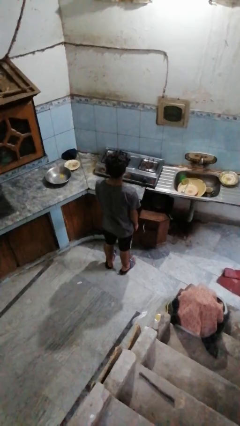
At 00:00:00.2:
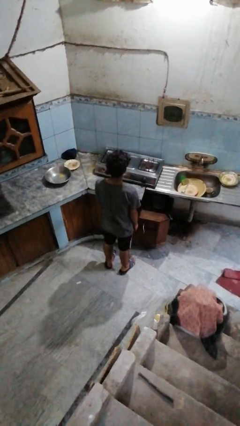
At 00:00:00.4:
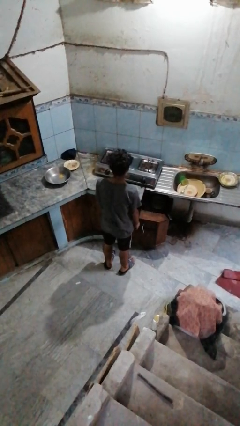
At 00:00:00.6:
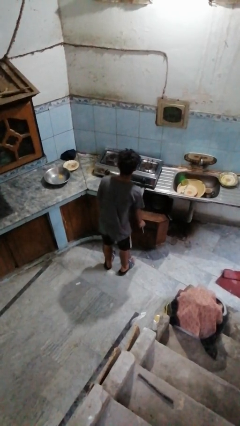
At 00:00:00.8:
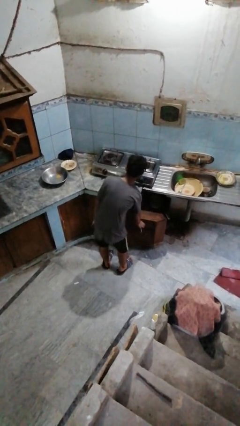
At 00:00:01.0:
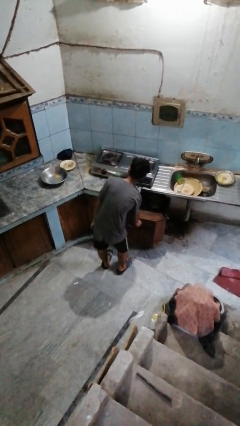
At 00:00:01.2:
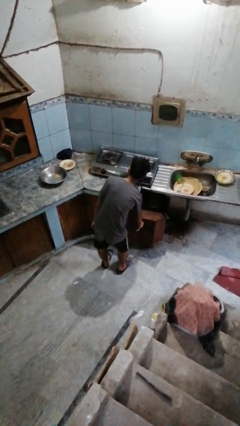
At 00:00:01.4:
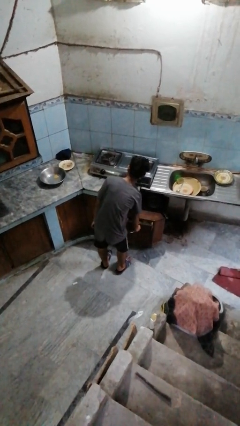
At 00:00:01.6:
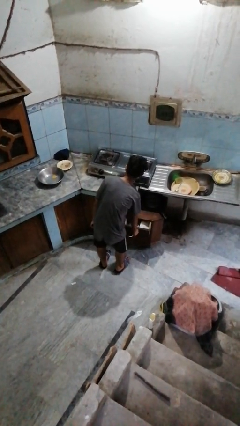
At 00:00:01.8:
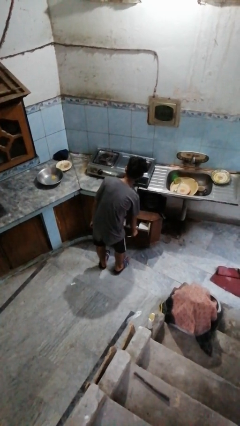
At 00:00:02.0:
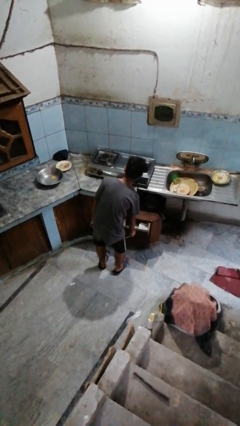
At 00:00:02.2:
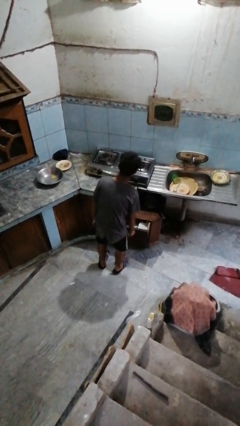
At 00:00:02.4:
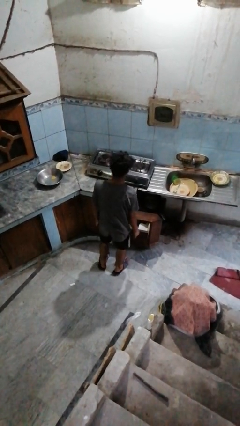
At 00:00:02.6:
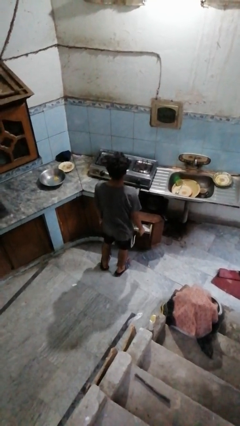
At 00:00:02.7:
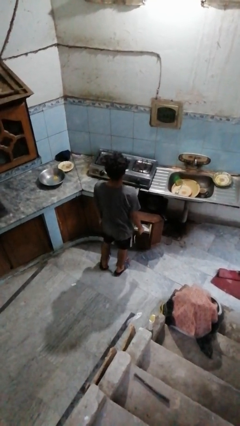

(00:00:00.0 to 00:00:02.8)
person opens kitchen drawer

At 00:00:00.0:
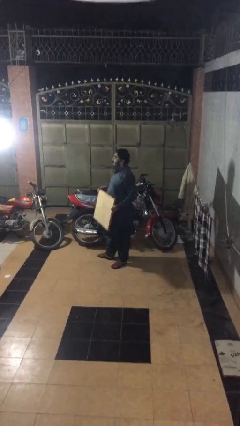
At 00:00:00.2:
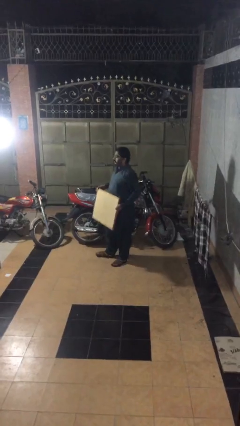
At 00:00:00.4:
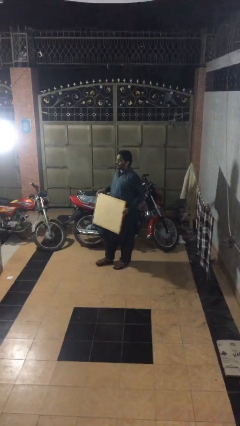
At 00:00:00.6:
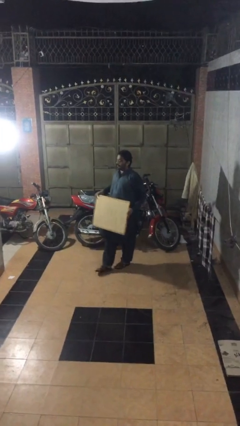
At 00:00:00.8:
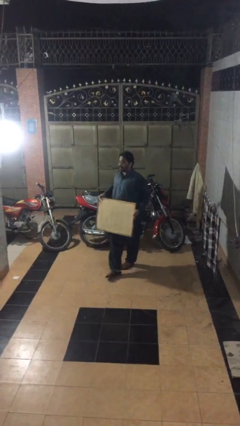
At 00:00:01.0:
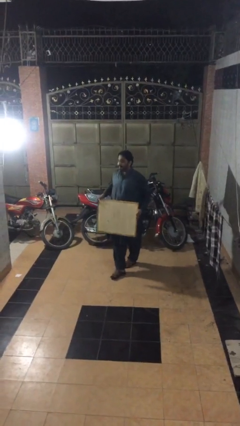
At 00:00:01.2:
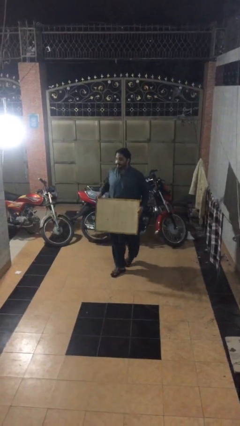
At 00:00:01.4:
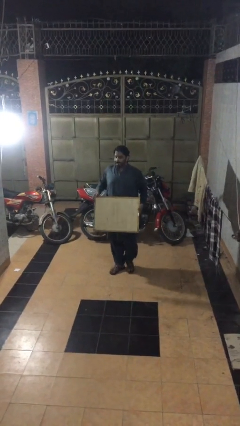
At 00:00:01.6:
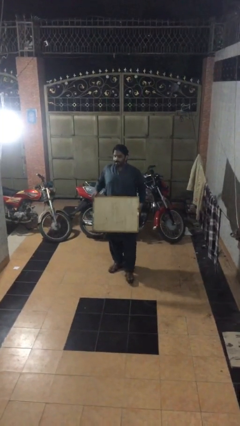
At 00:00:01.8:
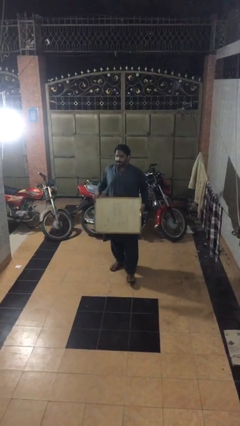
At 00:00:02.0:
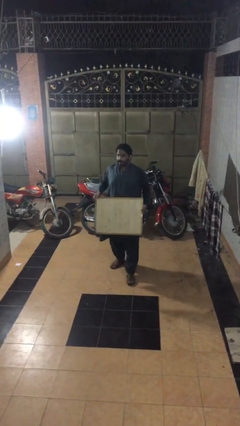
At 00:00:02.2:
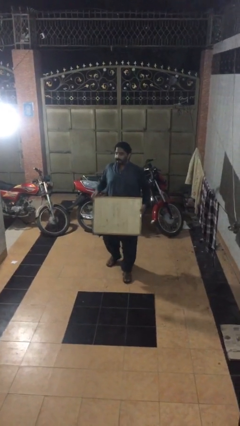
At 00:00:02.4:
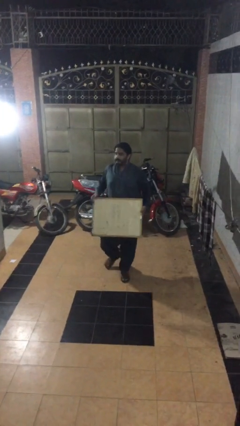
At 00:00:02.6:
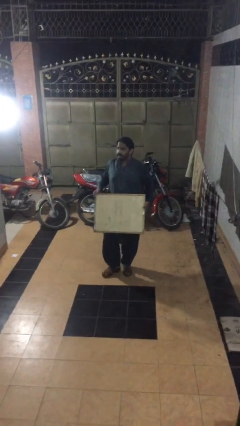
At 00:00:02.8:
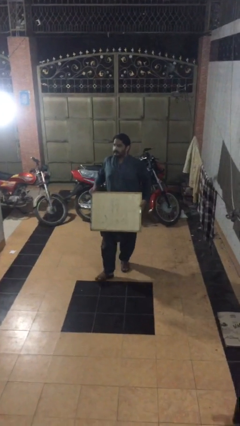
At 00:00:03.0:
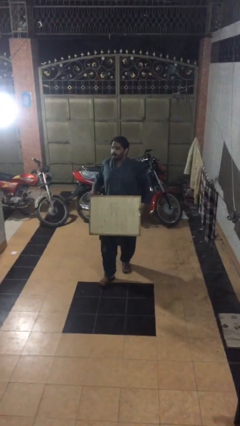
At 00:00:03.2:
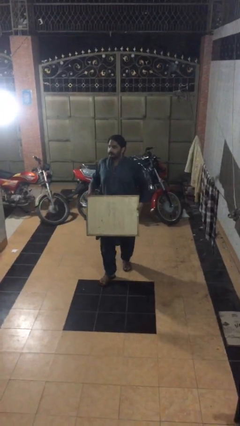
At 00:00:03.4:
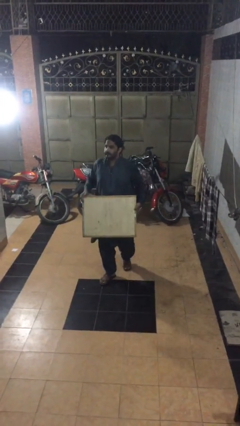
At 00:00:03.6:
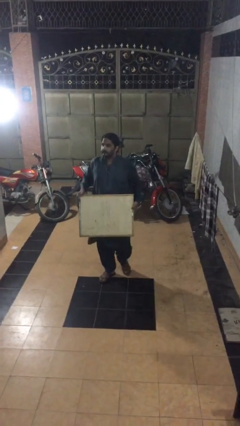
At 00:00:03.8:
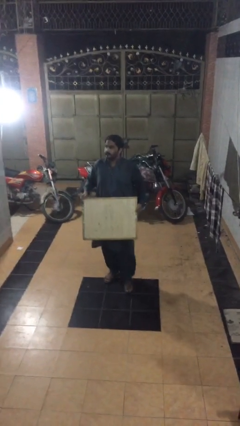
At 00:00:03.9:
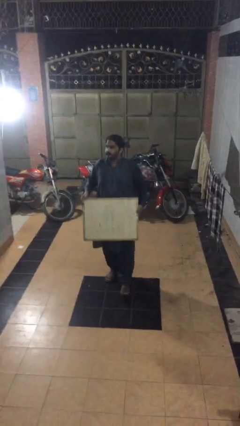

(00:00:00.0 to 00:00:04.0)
person carries heavy object

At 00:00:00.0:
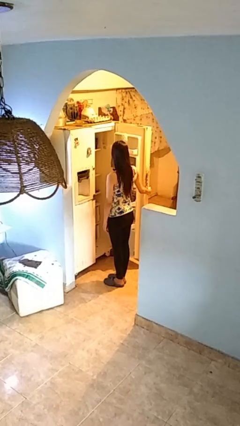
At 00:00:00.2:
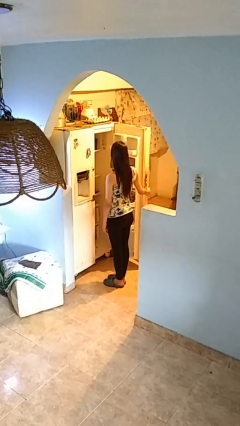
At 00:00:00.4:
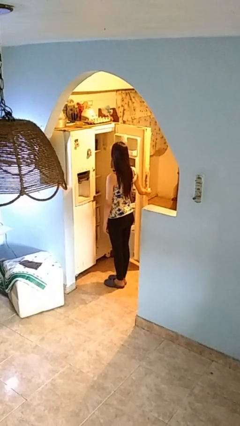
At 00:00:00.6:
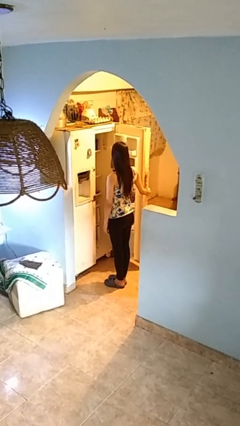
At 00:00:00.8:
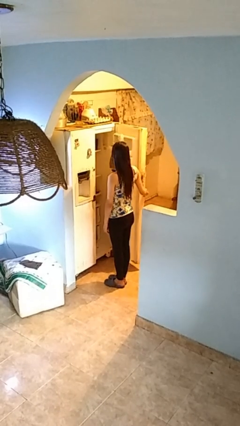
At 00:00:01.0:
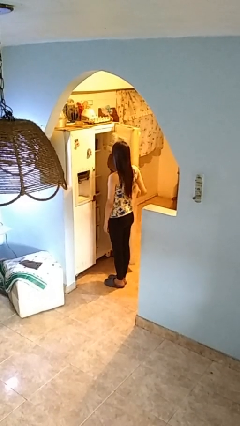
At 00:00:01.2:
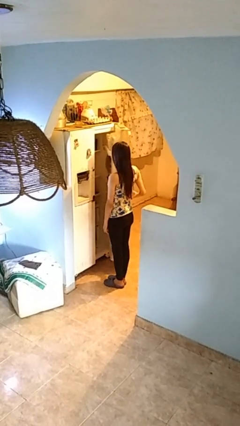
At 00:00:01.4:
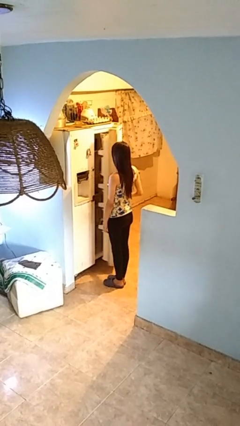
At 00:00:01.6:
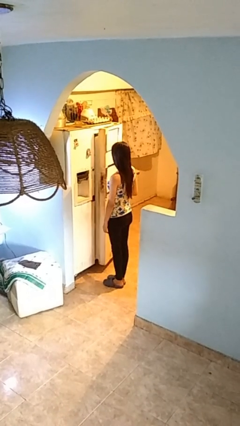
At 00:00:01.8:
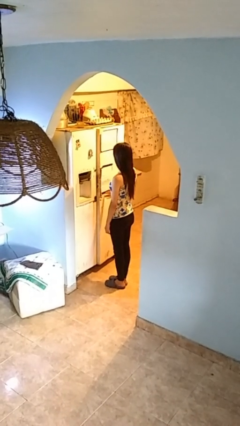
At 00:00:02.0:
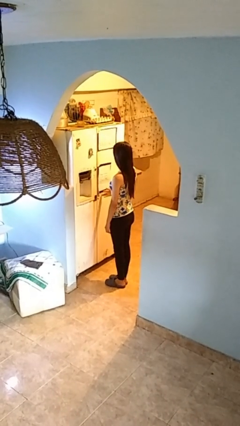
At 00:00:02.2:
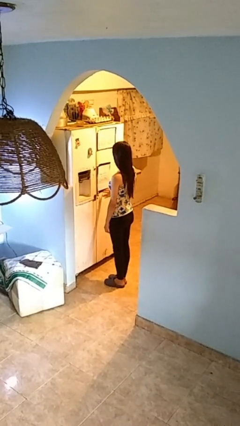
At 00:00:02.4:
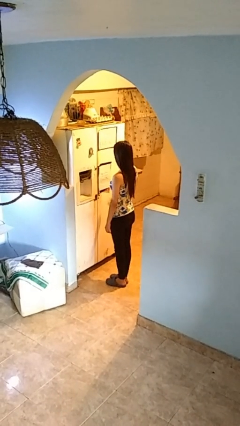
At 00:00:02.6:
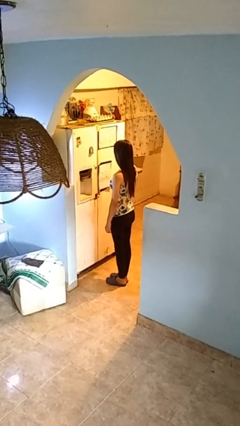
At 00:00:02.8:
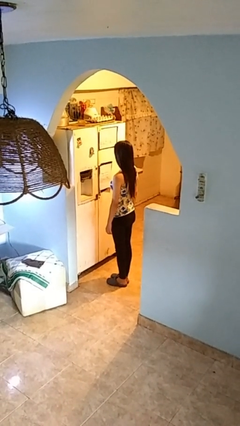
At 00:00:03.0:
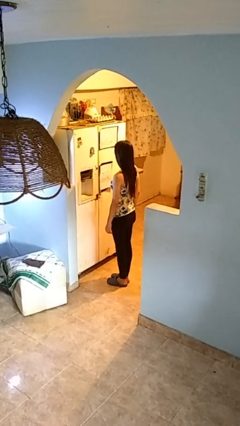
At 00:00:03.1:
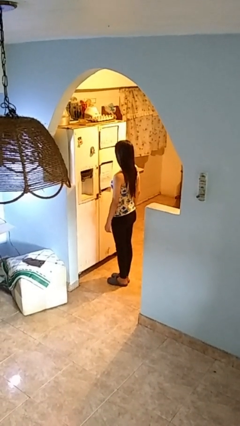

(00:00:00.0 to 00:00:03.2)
person closes refrigerator

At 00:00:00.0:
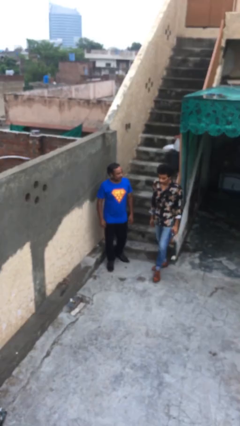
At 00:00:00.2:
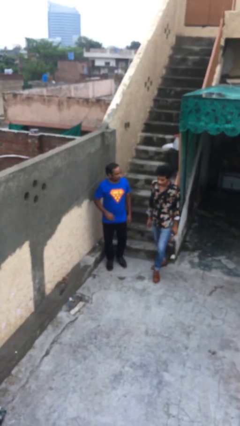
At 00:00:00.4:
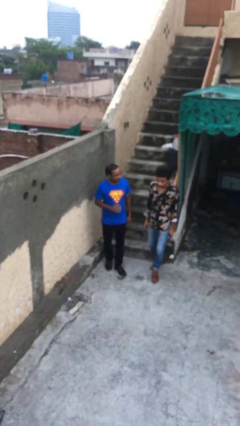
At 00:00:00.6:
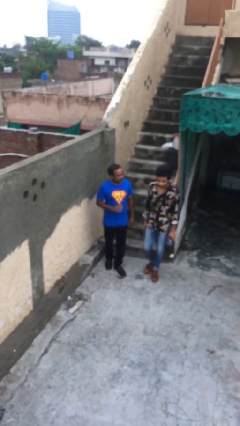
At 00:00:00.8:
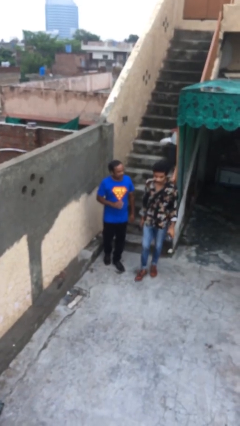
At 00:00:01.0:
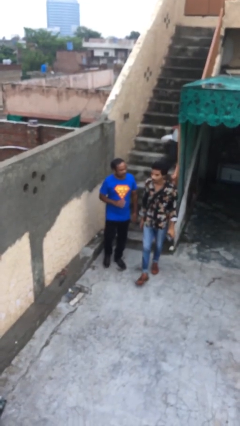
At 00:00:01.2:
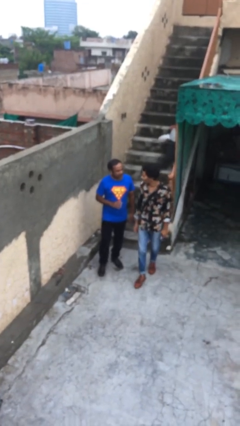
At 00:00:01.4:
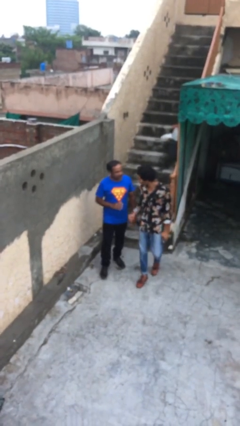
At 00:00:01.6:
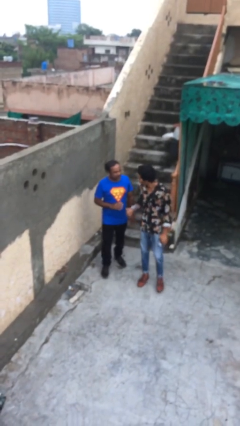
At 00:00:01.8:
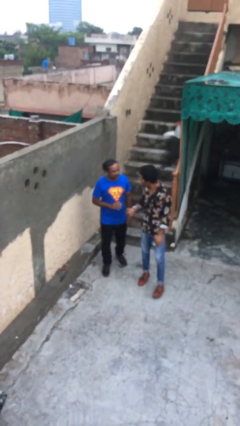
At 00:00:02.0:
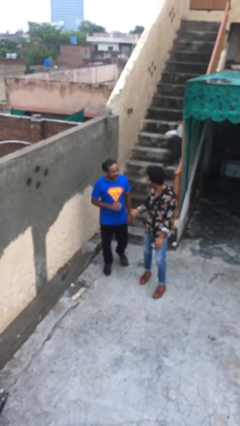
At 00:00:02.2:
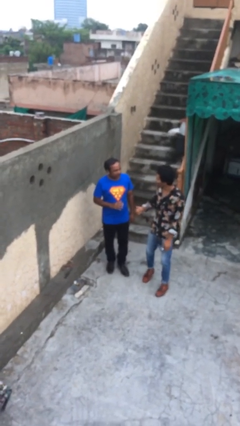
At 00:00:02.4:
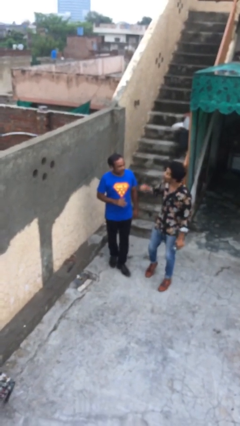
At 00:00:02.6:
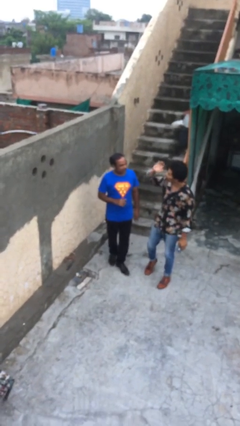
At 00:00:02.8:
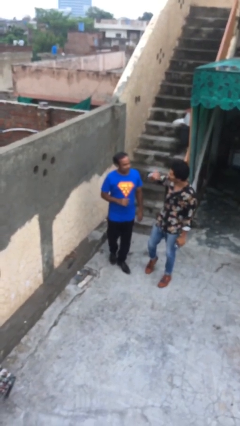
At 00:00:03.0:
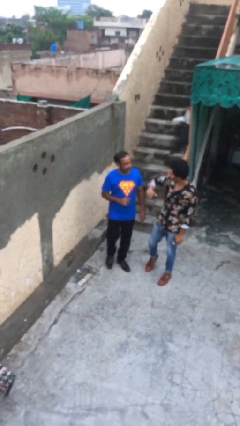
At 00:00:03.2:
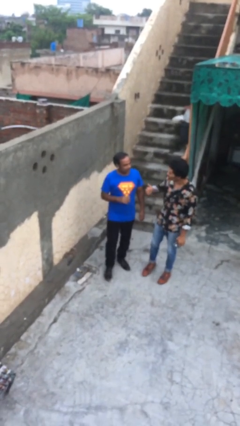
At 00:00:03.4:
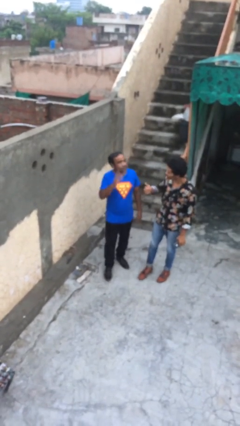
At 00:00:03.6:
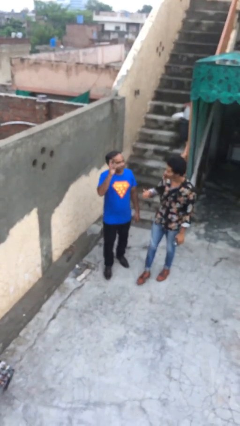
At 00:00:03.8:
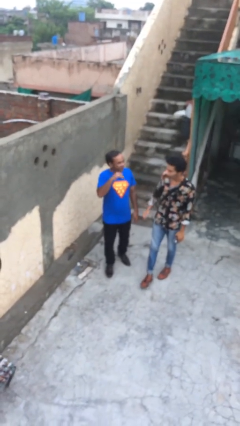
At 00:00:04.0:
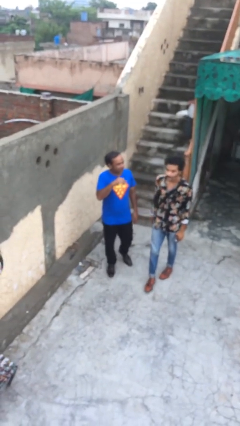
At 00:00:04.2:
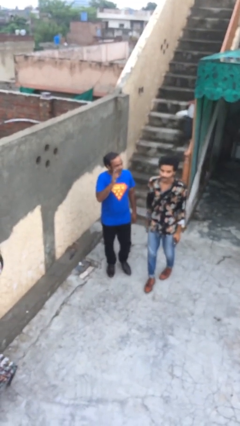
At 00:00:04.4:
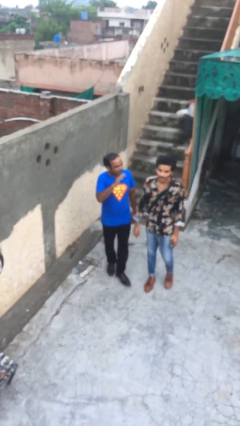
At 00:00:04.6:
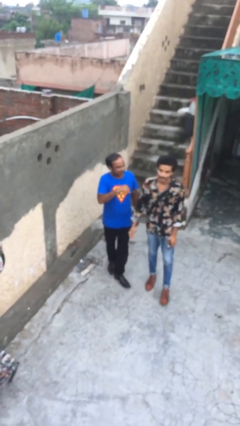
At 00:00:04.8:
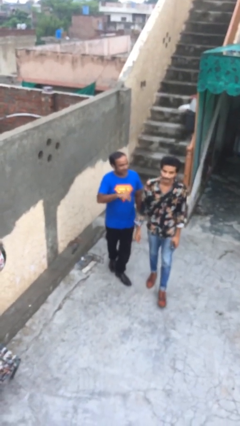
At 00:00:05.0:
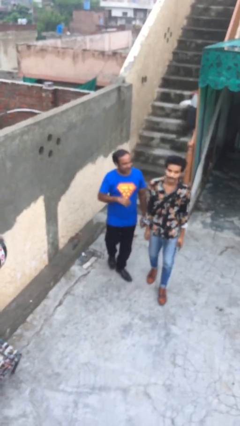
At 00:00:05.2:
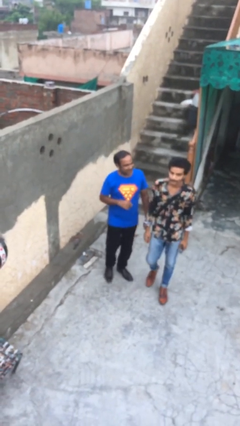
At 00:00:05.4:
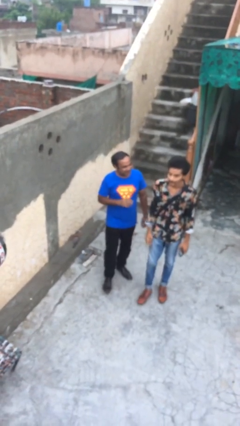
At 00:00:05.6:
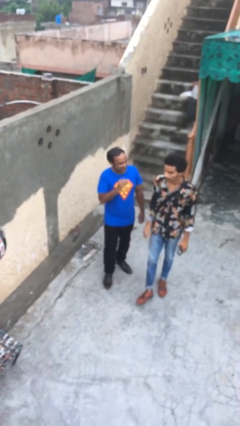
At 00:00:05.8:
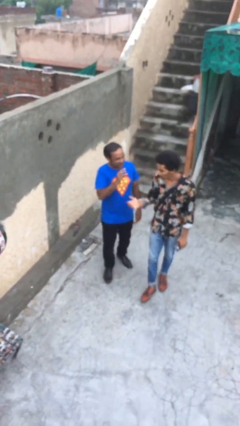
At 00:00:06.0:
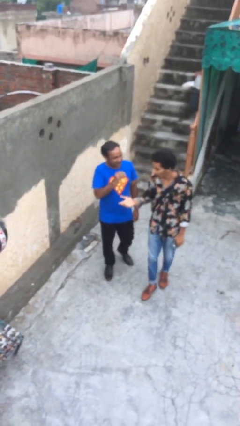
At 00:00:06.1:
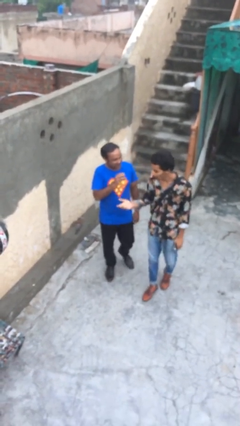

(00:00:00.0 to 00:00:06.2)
person talks to person

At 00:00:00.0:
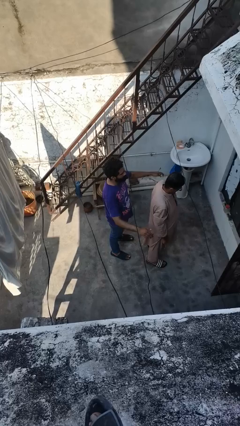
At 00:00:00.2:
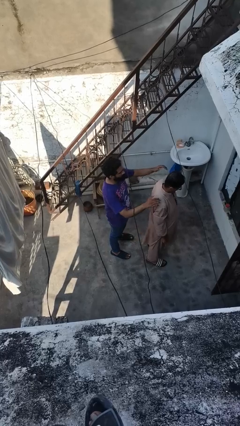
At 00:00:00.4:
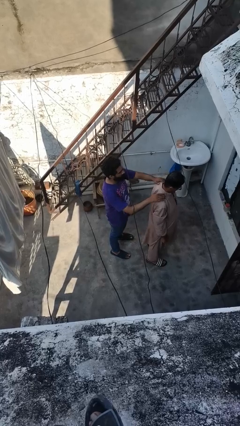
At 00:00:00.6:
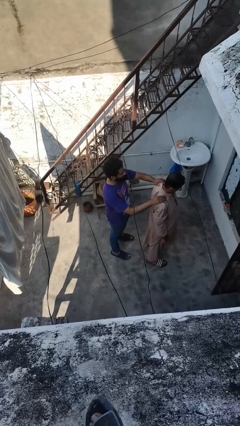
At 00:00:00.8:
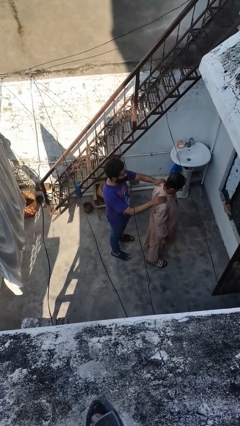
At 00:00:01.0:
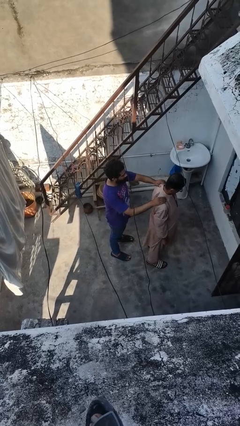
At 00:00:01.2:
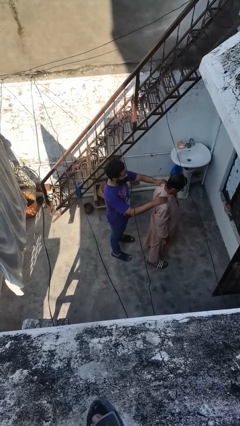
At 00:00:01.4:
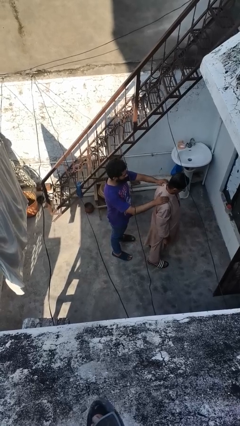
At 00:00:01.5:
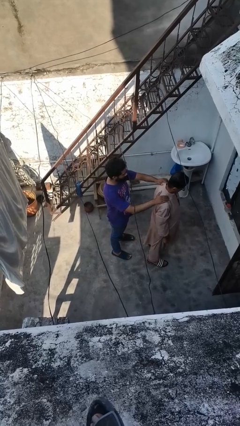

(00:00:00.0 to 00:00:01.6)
person touches back of person
